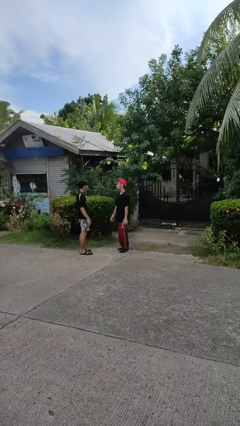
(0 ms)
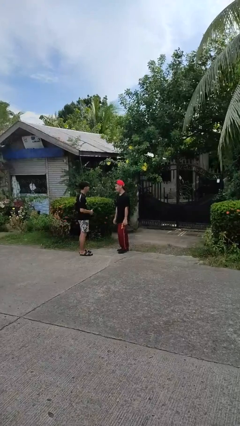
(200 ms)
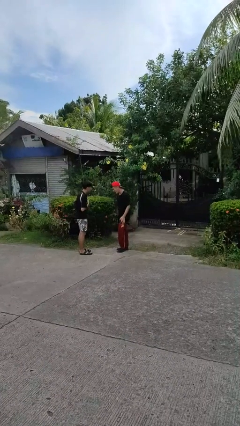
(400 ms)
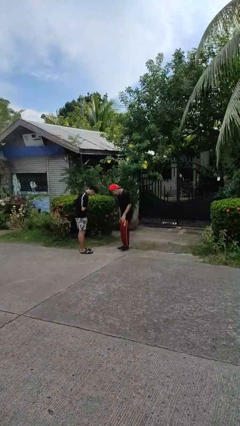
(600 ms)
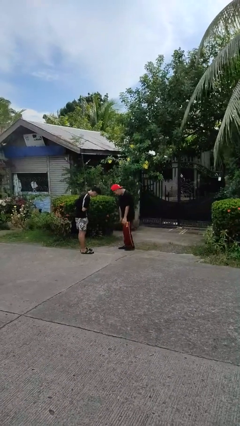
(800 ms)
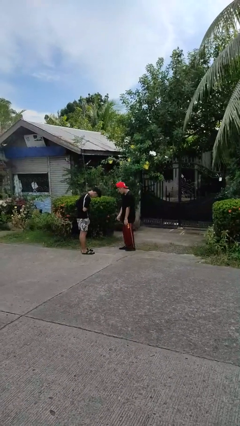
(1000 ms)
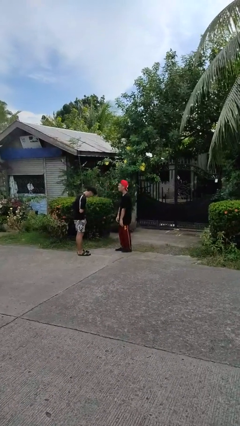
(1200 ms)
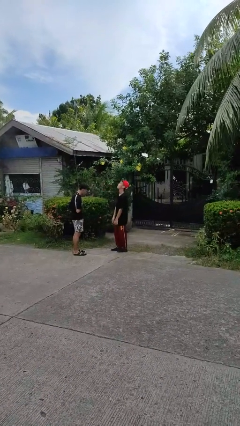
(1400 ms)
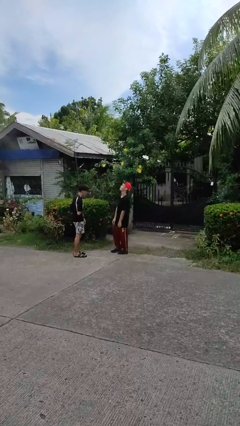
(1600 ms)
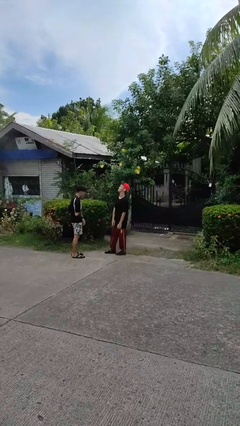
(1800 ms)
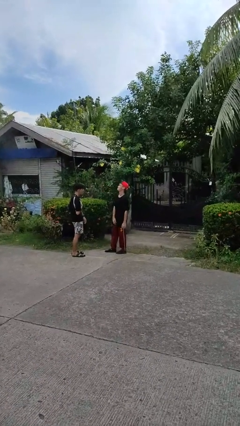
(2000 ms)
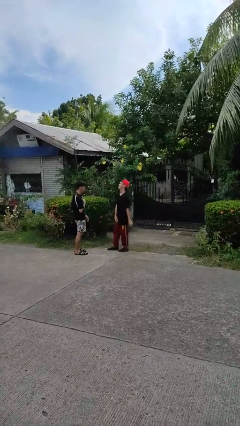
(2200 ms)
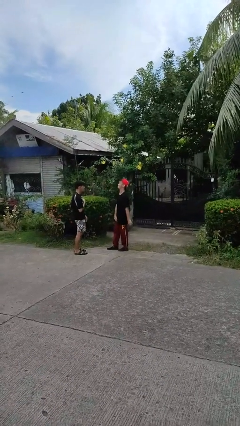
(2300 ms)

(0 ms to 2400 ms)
person laughs with person

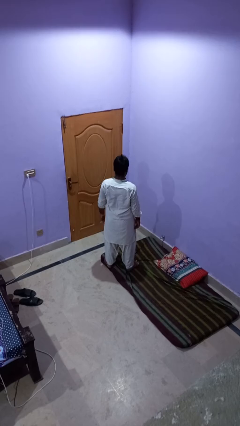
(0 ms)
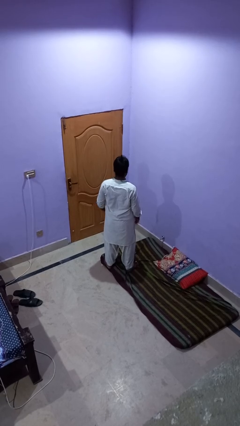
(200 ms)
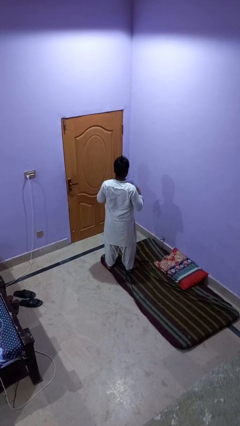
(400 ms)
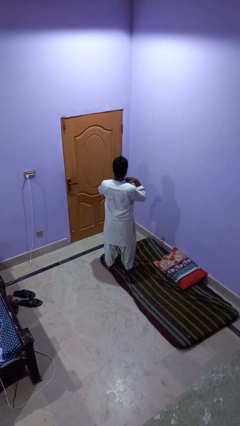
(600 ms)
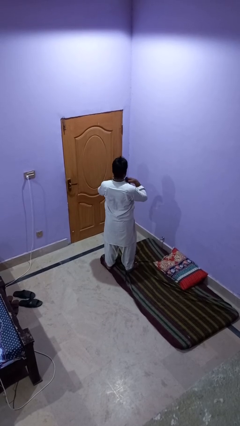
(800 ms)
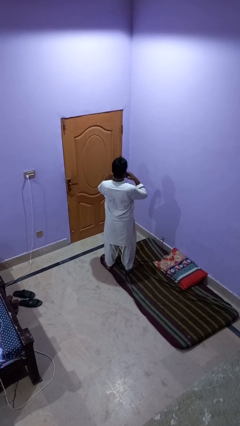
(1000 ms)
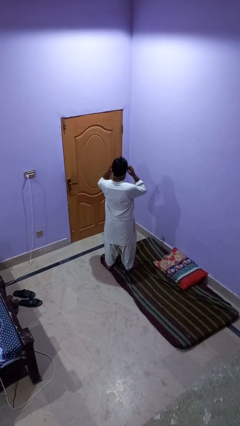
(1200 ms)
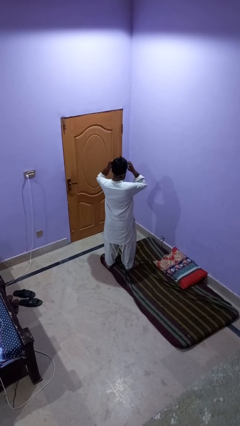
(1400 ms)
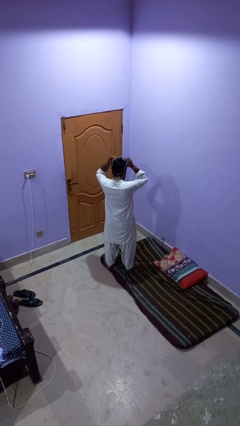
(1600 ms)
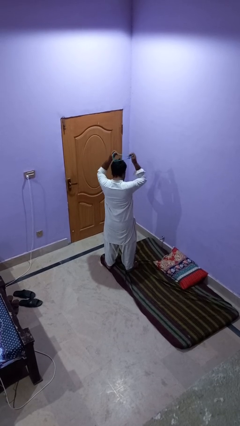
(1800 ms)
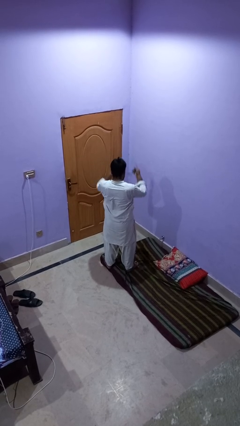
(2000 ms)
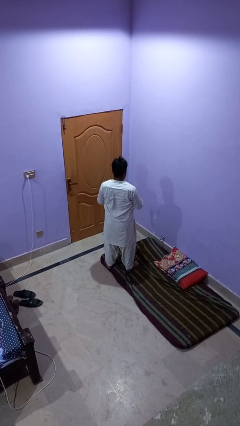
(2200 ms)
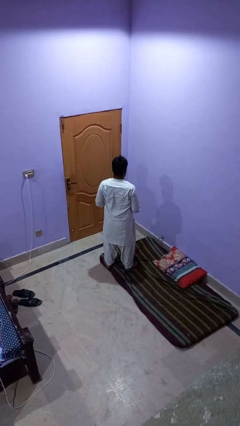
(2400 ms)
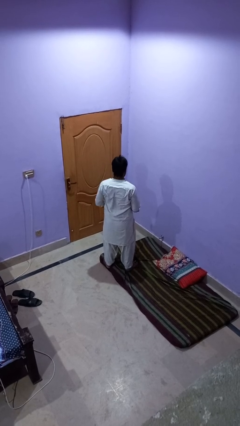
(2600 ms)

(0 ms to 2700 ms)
person takes off necklace

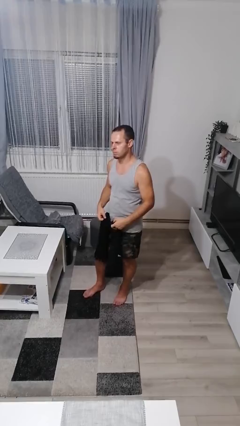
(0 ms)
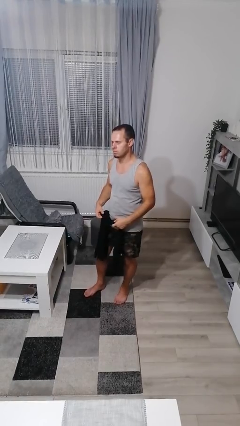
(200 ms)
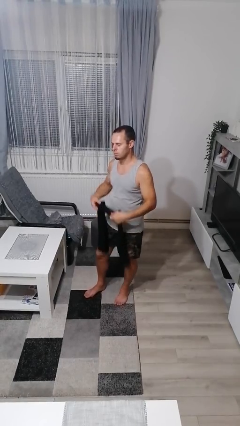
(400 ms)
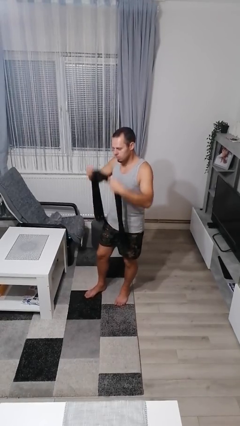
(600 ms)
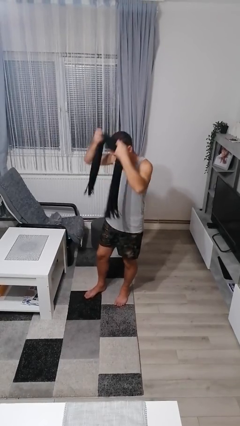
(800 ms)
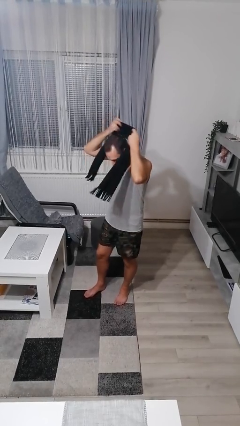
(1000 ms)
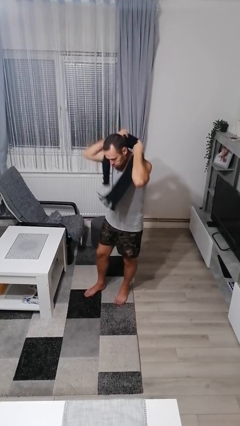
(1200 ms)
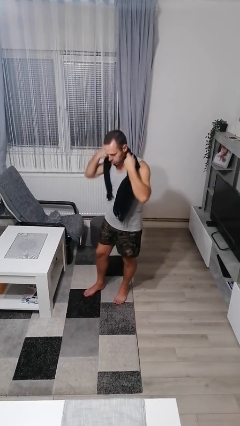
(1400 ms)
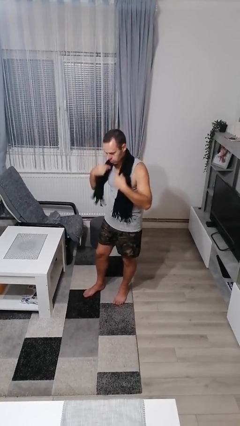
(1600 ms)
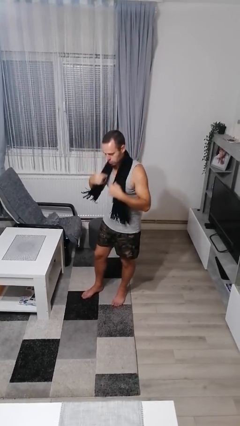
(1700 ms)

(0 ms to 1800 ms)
person puts on scarf

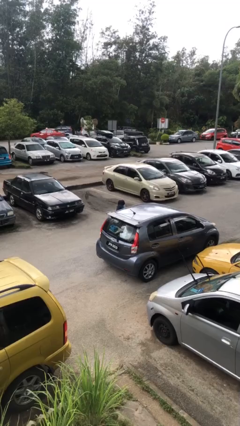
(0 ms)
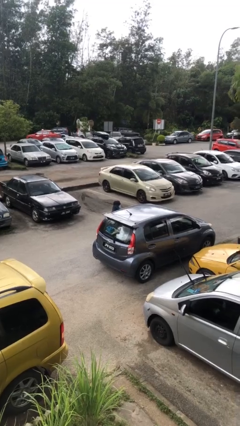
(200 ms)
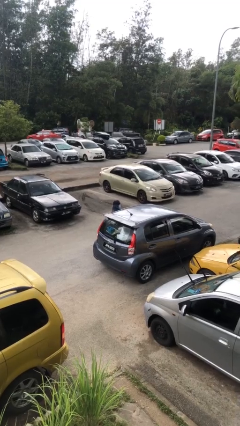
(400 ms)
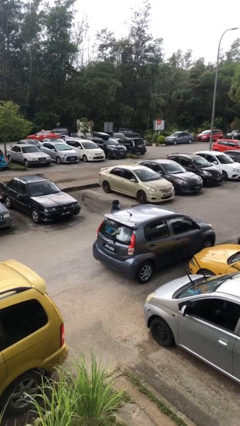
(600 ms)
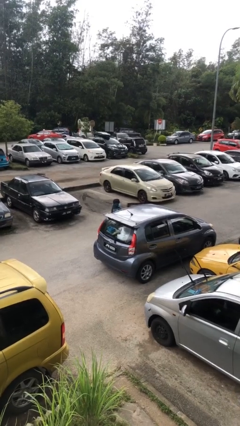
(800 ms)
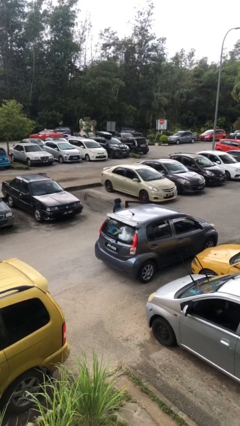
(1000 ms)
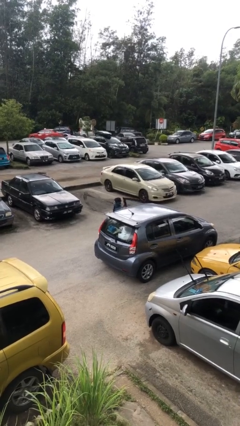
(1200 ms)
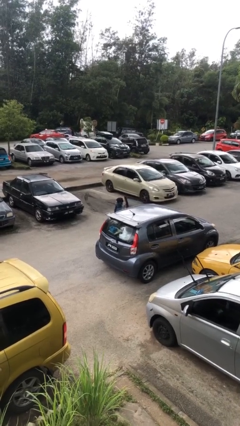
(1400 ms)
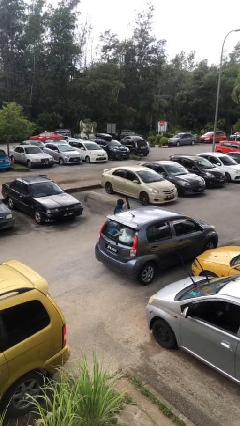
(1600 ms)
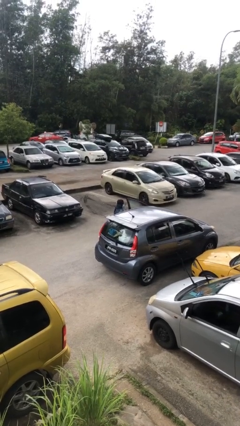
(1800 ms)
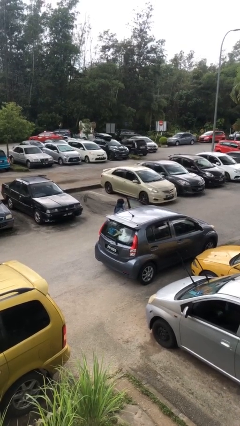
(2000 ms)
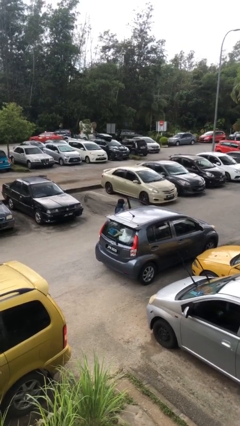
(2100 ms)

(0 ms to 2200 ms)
person opens car door

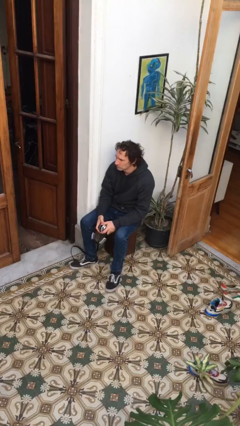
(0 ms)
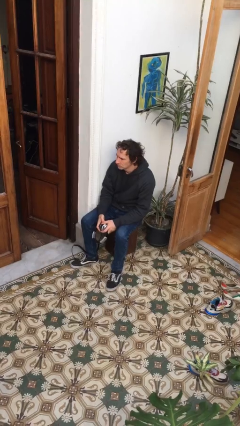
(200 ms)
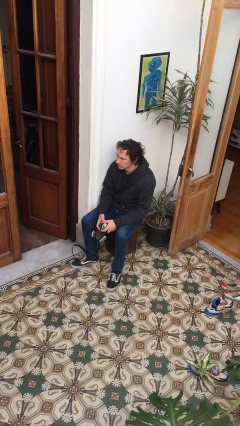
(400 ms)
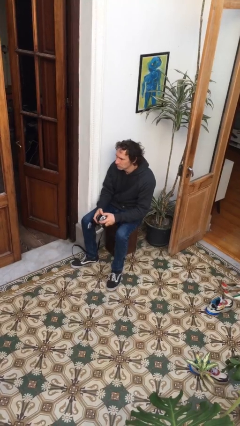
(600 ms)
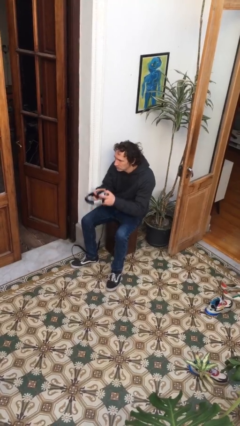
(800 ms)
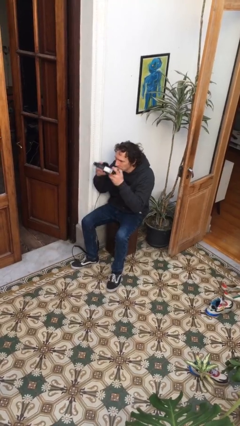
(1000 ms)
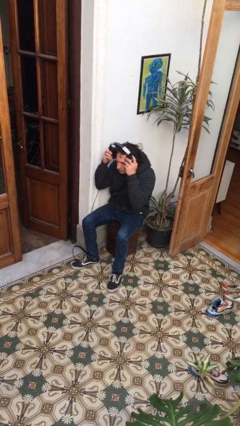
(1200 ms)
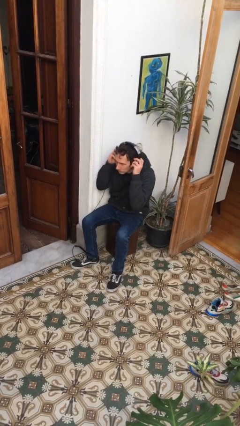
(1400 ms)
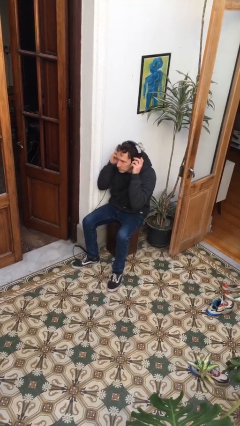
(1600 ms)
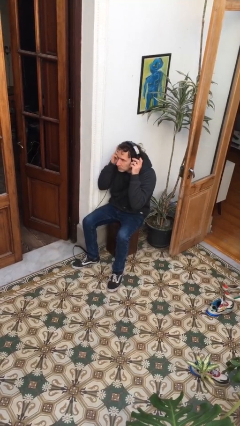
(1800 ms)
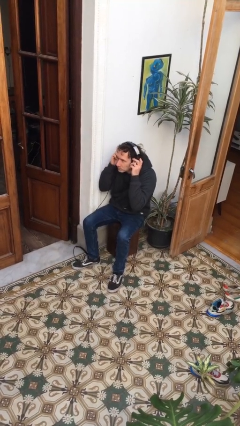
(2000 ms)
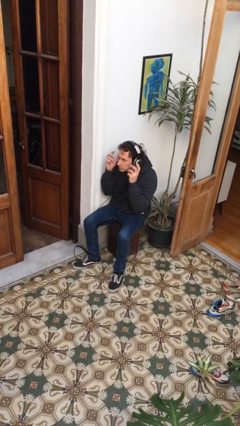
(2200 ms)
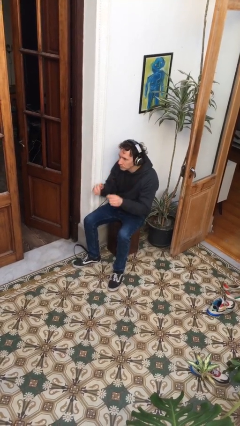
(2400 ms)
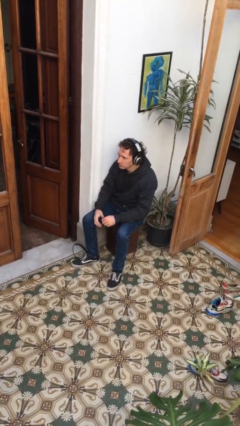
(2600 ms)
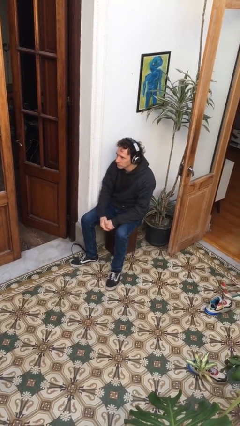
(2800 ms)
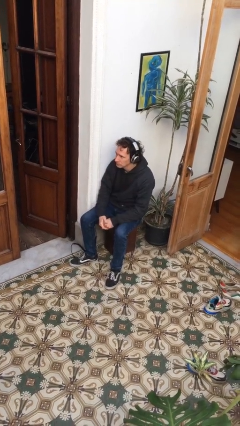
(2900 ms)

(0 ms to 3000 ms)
person puts on headphones

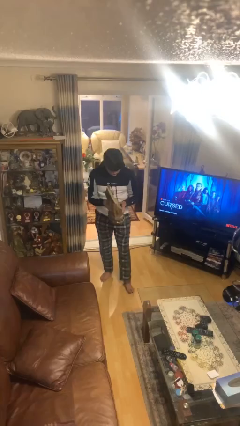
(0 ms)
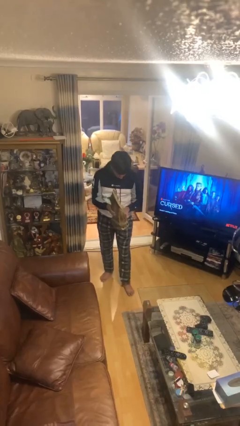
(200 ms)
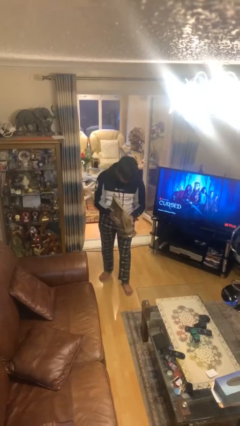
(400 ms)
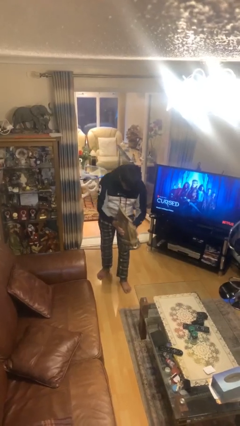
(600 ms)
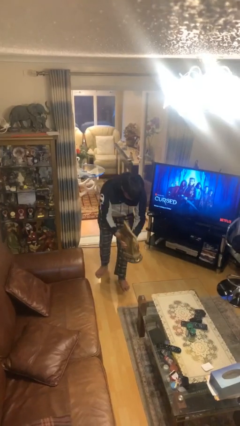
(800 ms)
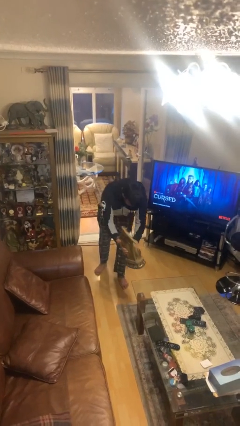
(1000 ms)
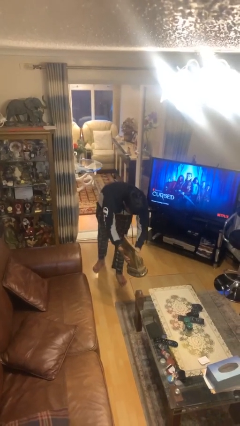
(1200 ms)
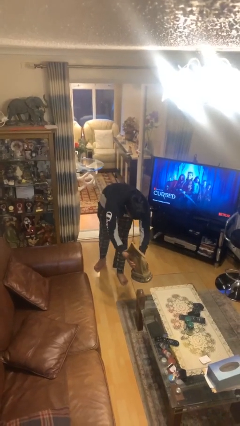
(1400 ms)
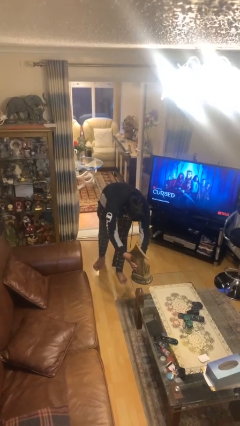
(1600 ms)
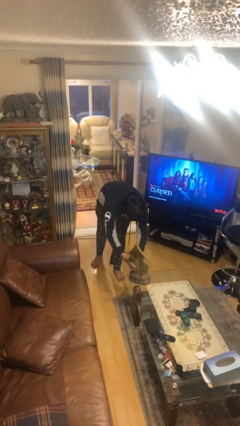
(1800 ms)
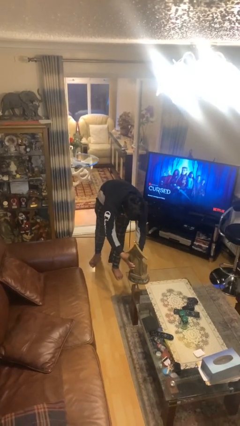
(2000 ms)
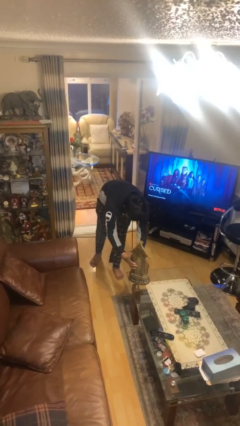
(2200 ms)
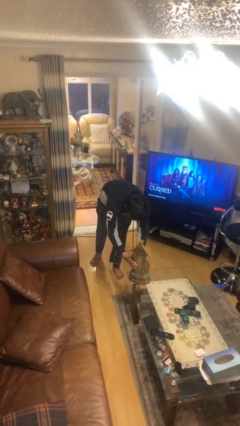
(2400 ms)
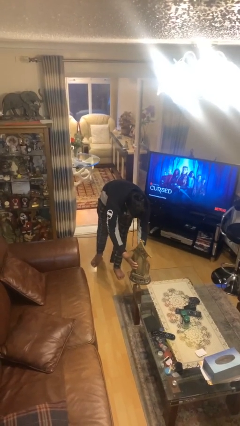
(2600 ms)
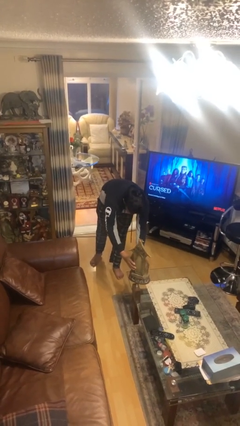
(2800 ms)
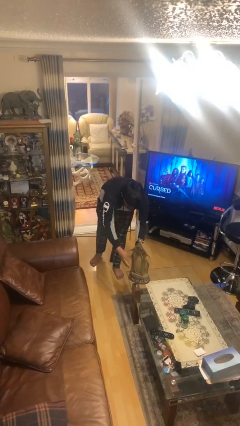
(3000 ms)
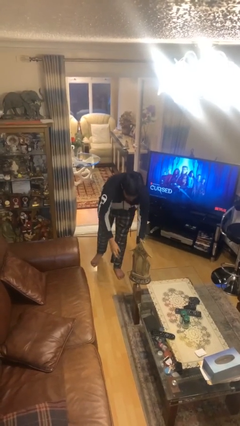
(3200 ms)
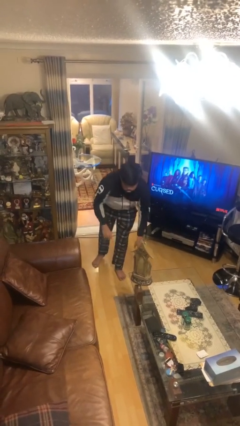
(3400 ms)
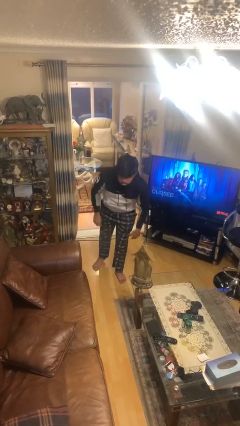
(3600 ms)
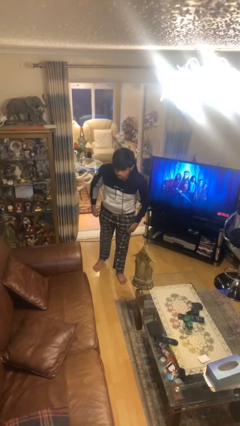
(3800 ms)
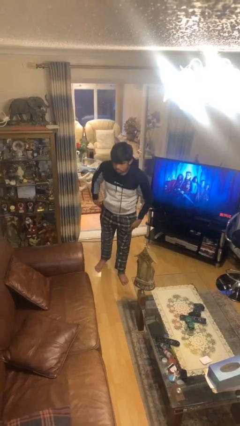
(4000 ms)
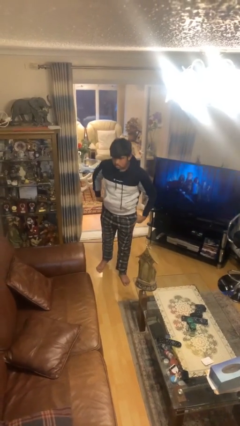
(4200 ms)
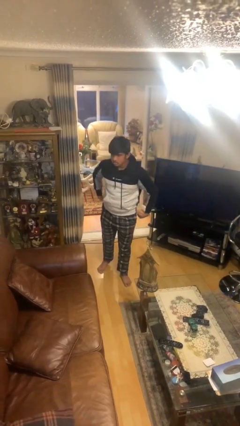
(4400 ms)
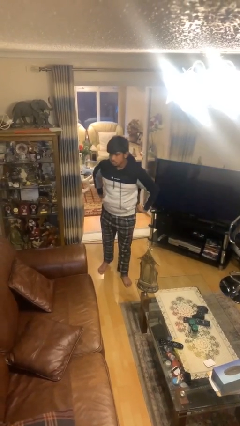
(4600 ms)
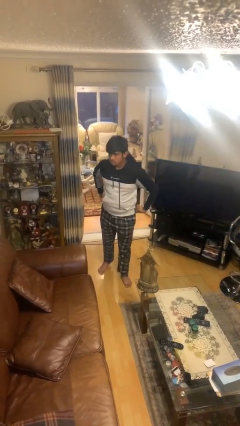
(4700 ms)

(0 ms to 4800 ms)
person puts down object on table

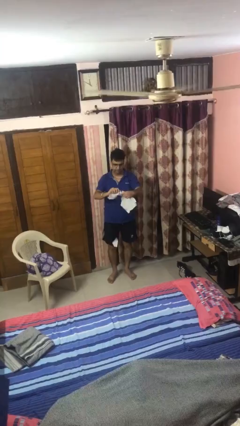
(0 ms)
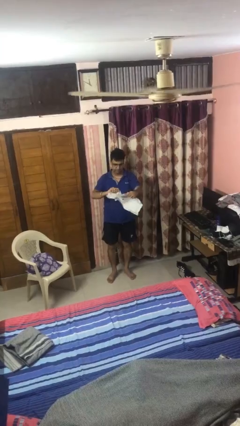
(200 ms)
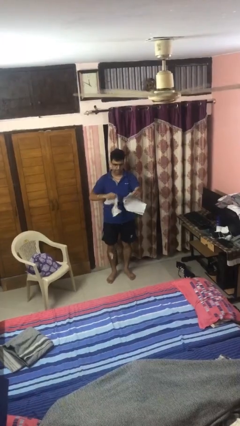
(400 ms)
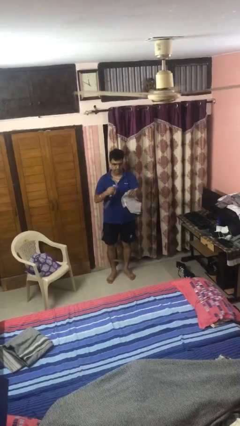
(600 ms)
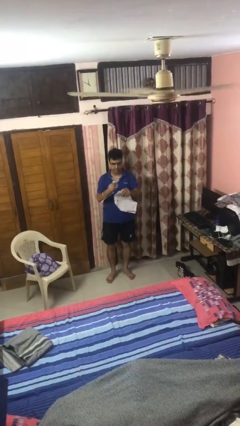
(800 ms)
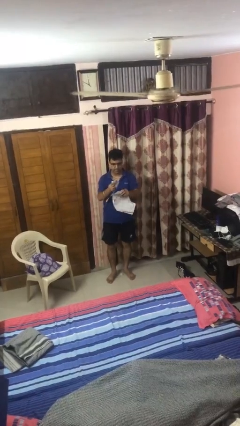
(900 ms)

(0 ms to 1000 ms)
person tears paper
